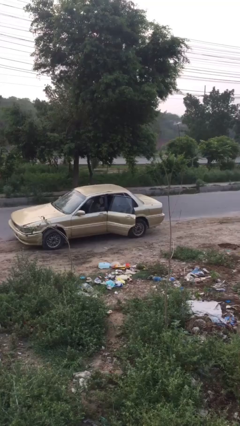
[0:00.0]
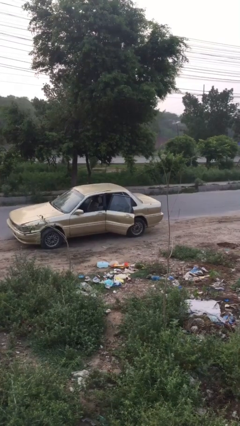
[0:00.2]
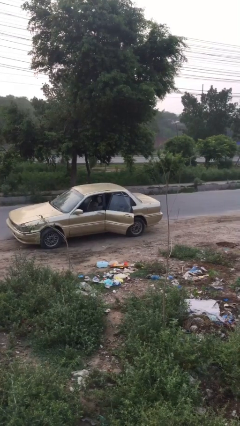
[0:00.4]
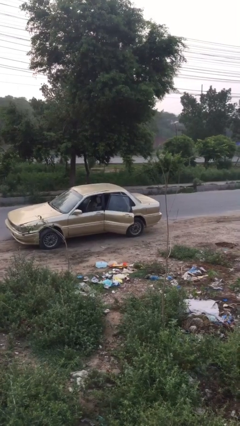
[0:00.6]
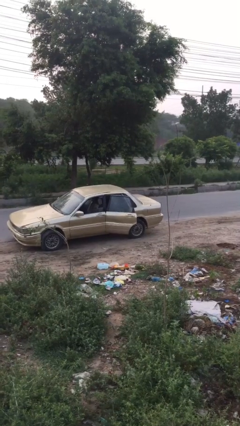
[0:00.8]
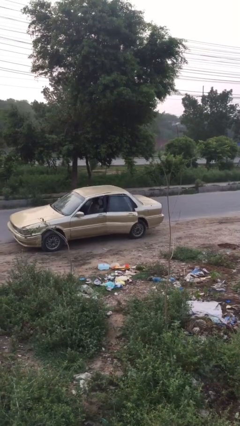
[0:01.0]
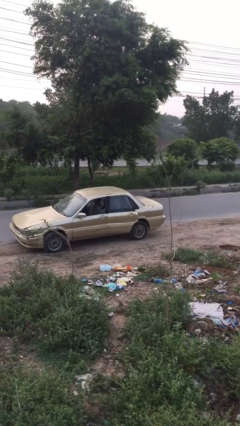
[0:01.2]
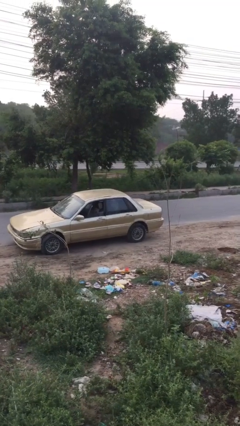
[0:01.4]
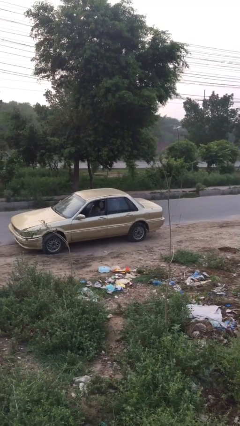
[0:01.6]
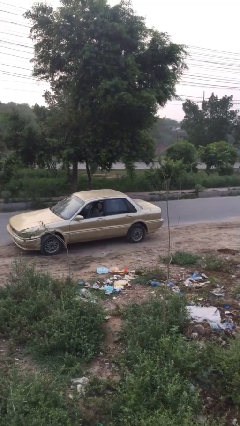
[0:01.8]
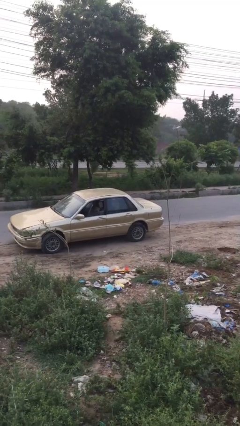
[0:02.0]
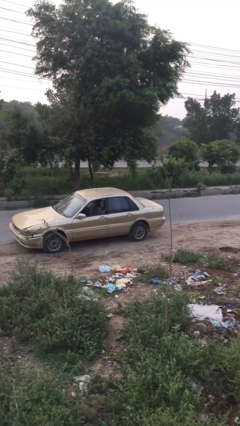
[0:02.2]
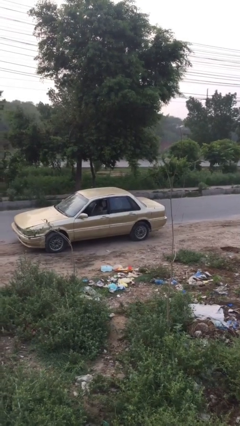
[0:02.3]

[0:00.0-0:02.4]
person closes car door

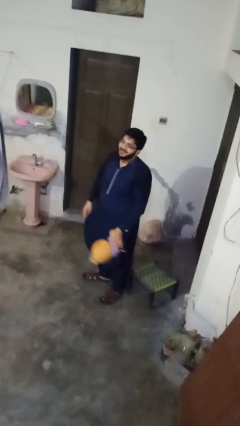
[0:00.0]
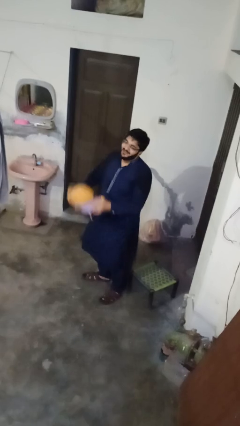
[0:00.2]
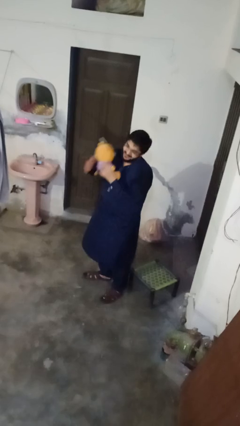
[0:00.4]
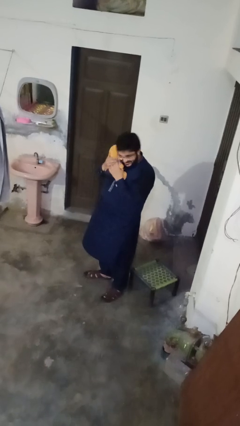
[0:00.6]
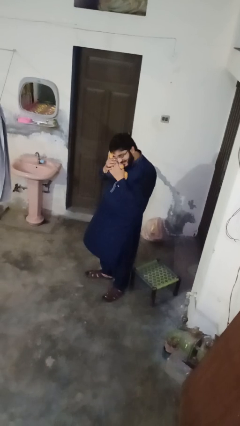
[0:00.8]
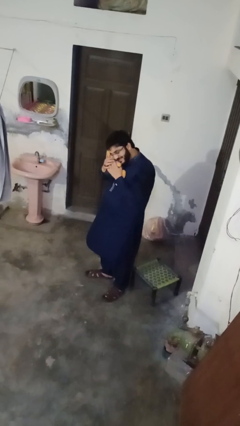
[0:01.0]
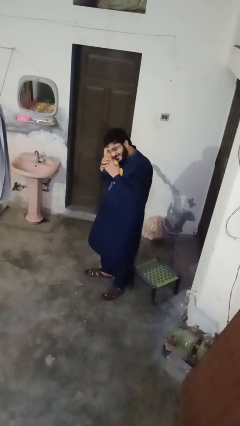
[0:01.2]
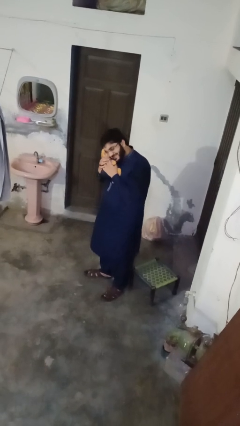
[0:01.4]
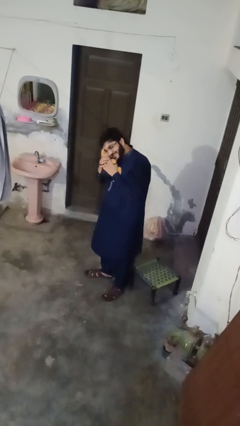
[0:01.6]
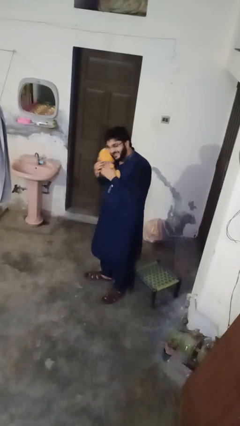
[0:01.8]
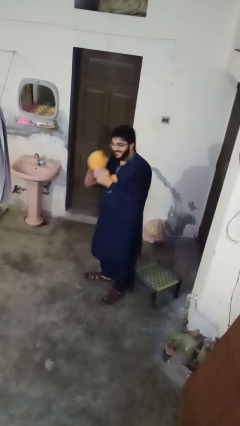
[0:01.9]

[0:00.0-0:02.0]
person hugs stuffed animal

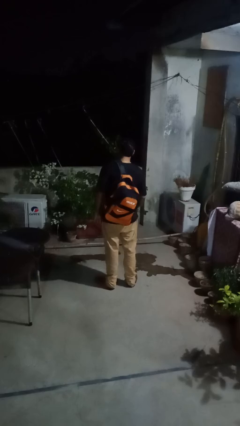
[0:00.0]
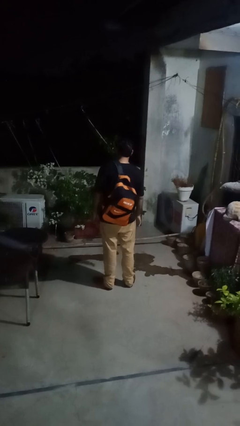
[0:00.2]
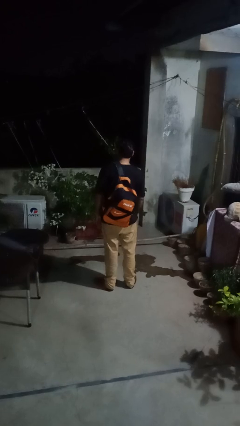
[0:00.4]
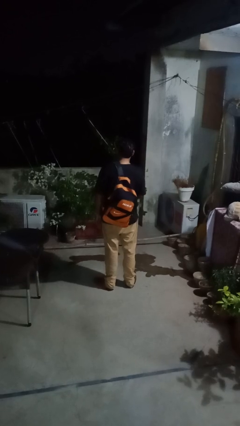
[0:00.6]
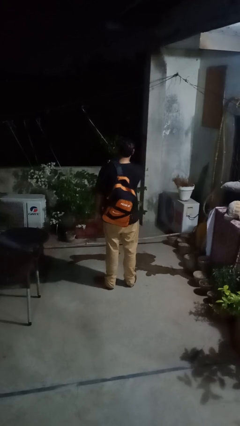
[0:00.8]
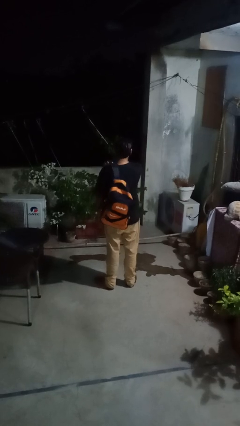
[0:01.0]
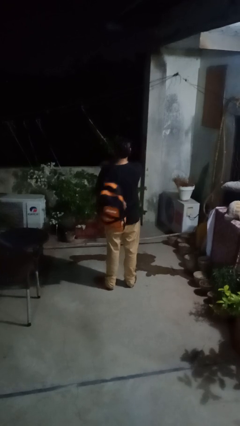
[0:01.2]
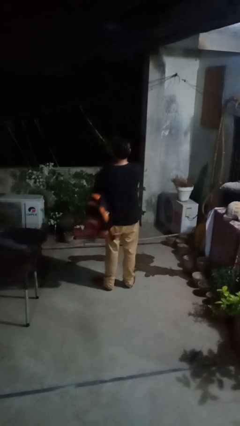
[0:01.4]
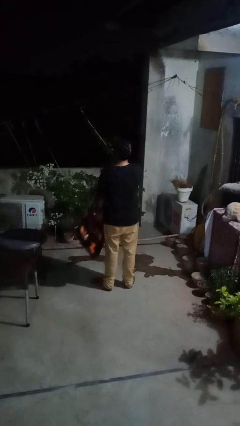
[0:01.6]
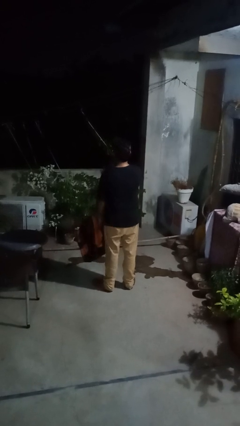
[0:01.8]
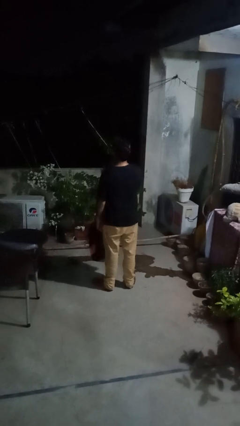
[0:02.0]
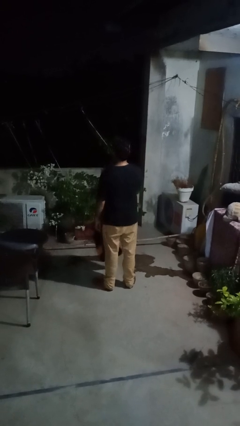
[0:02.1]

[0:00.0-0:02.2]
person takes off backpack

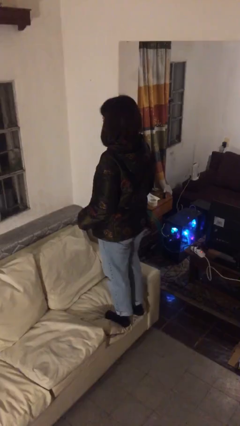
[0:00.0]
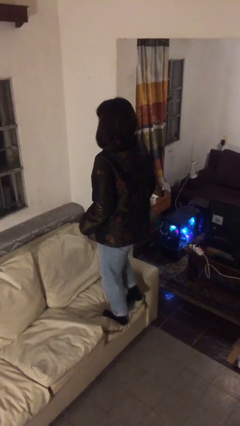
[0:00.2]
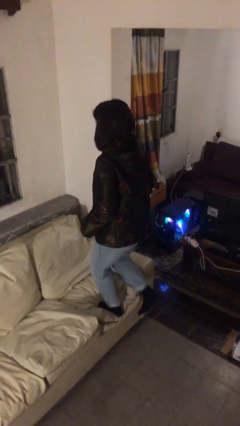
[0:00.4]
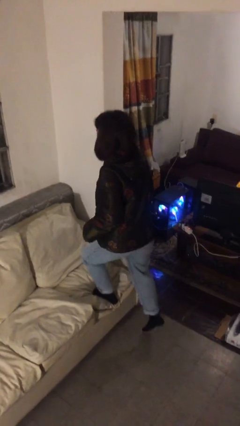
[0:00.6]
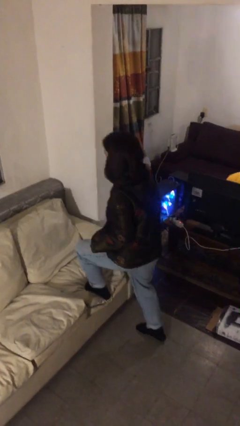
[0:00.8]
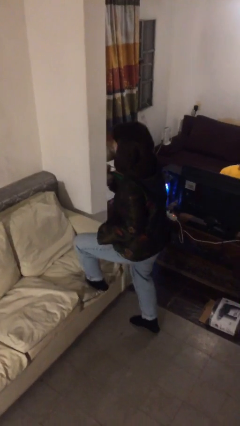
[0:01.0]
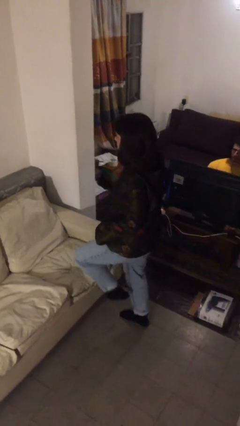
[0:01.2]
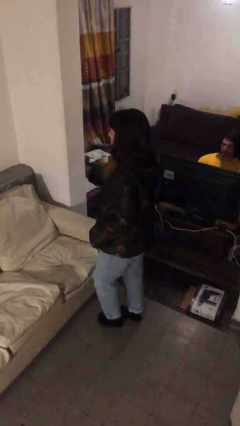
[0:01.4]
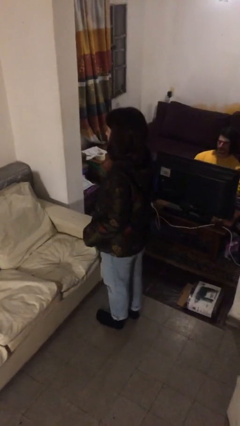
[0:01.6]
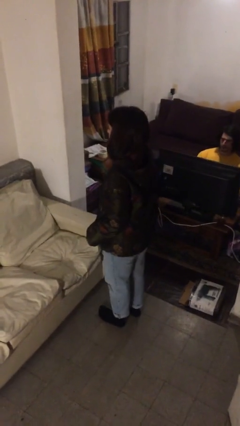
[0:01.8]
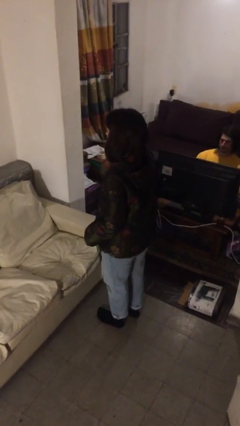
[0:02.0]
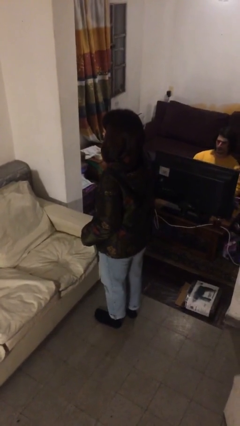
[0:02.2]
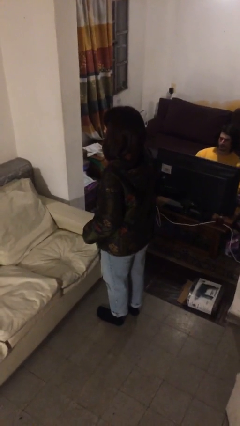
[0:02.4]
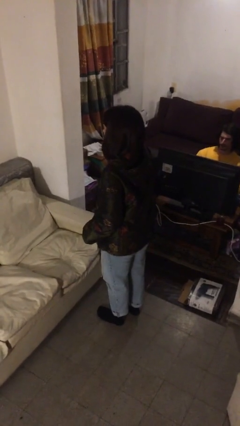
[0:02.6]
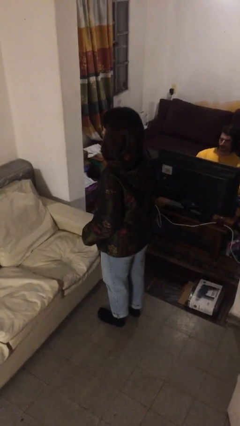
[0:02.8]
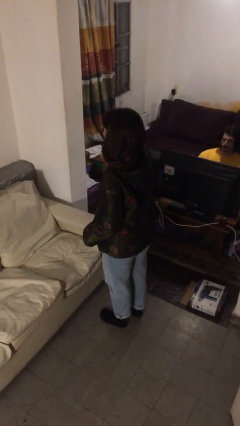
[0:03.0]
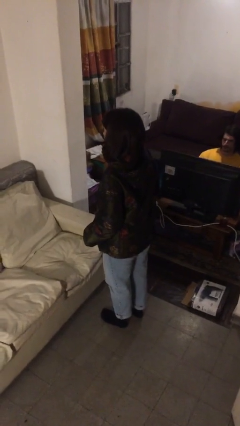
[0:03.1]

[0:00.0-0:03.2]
person climbs off couch

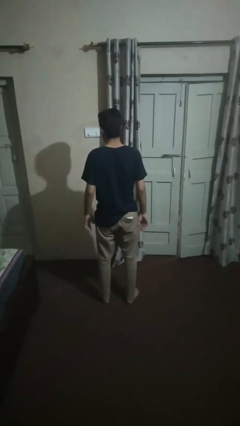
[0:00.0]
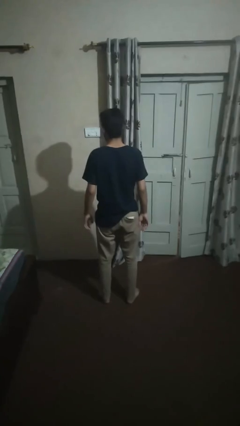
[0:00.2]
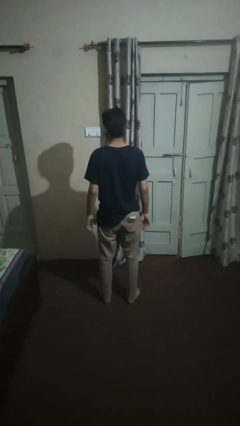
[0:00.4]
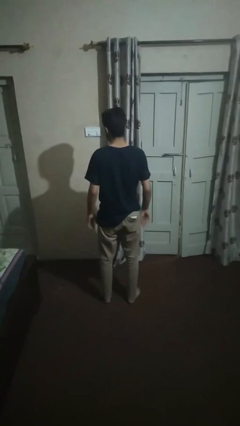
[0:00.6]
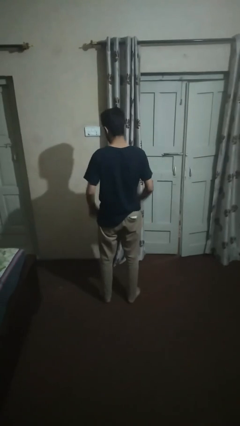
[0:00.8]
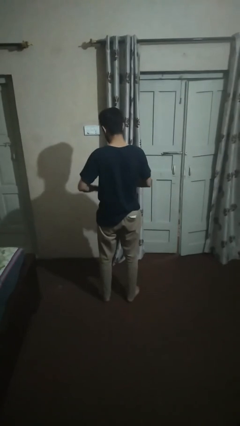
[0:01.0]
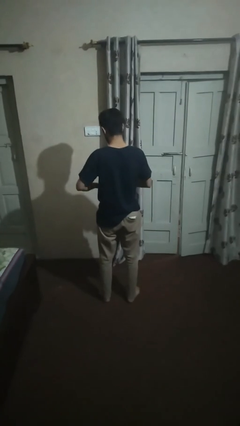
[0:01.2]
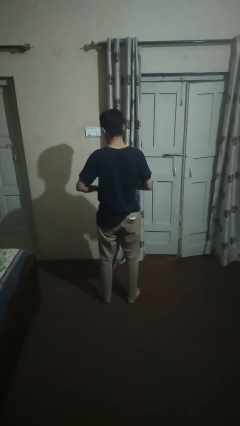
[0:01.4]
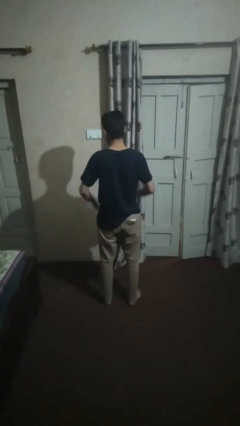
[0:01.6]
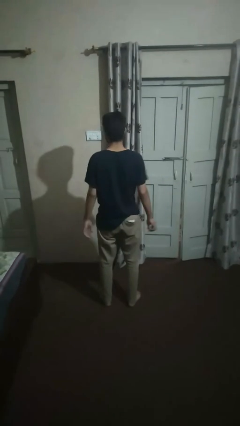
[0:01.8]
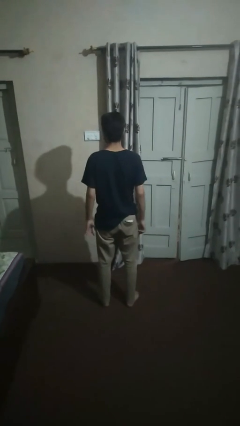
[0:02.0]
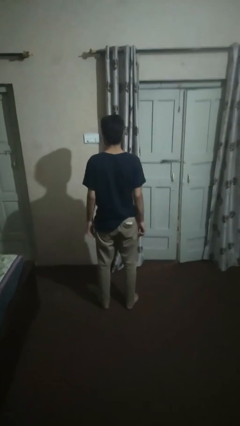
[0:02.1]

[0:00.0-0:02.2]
person takes off ring

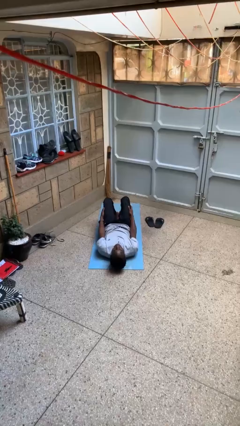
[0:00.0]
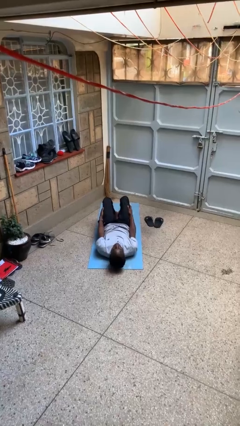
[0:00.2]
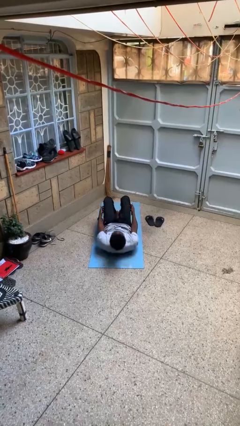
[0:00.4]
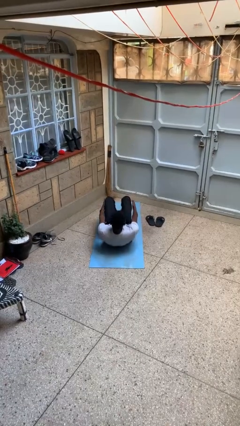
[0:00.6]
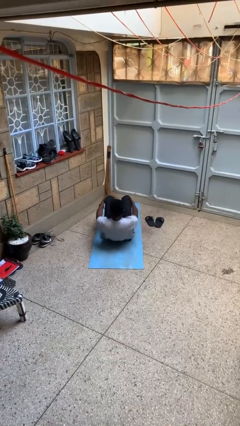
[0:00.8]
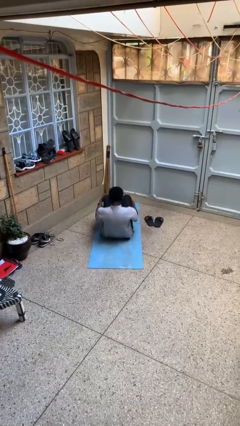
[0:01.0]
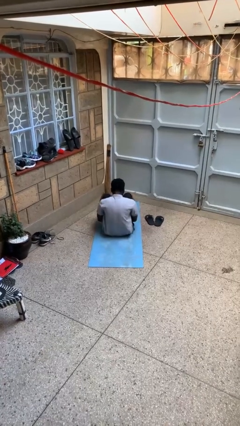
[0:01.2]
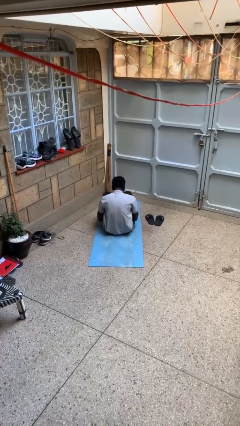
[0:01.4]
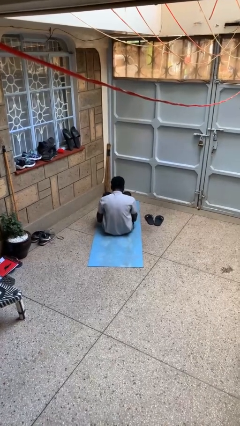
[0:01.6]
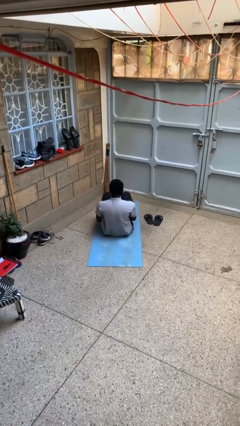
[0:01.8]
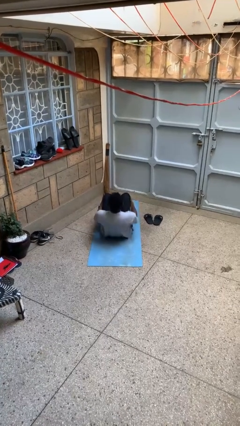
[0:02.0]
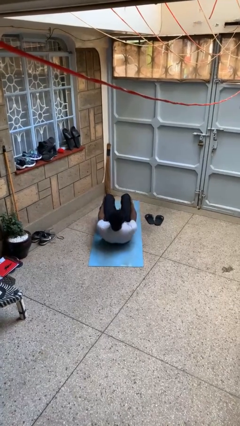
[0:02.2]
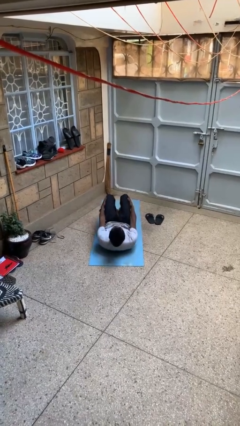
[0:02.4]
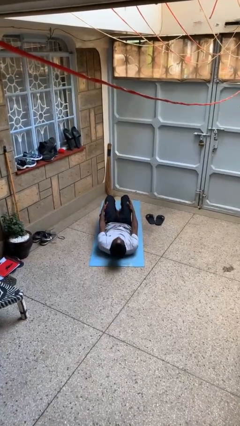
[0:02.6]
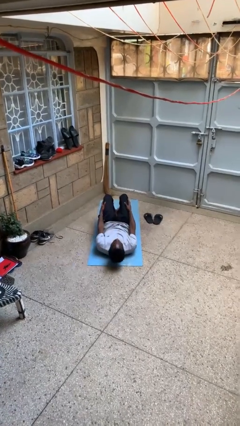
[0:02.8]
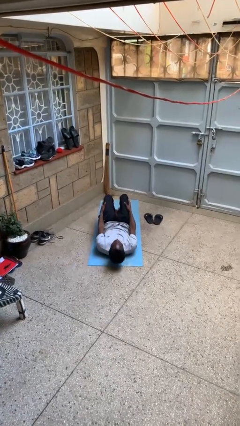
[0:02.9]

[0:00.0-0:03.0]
person exercises with situp

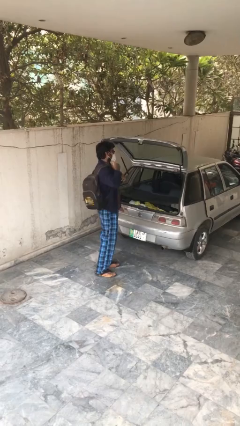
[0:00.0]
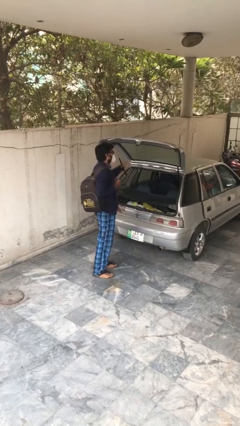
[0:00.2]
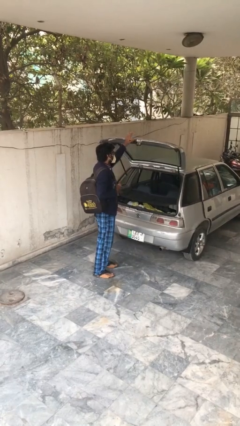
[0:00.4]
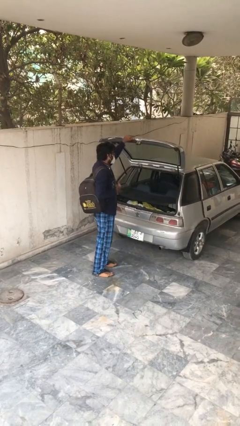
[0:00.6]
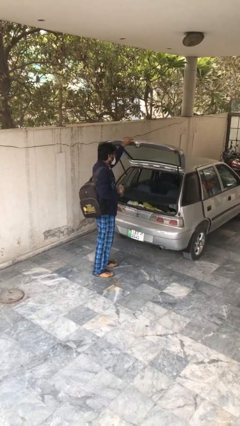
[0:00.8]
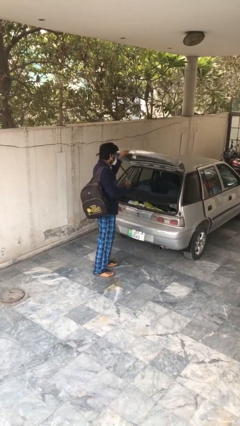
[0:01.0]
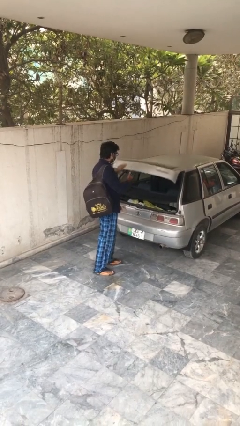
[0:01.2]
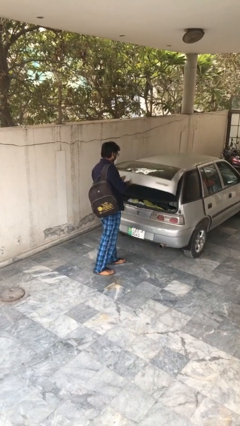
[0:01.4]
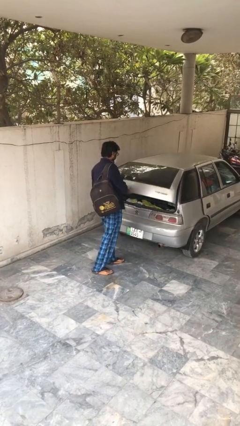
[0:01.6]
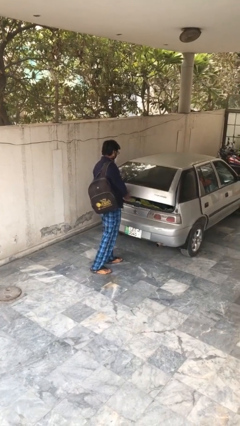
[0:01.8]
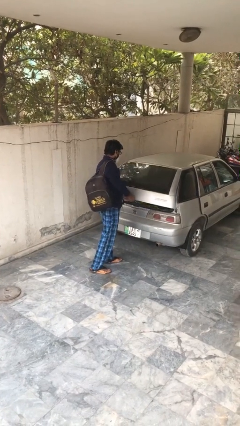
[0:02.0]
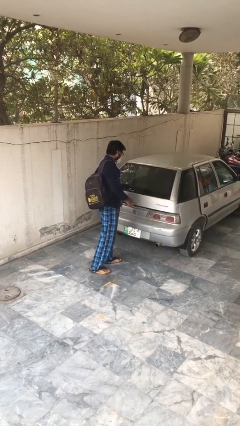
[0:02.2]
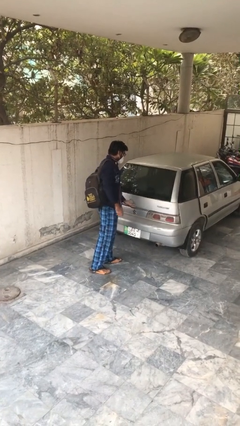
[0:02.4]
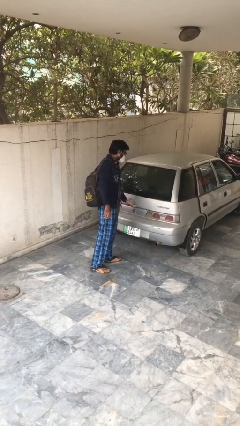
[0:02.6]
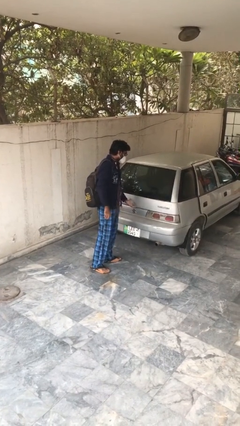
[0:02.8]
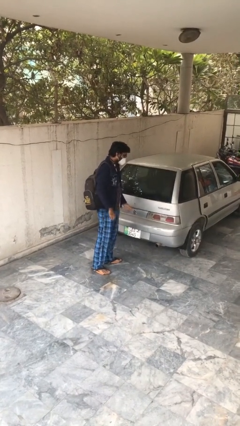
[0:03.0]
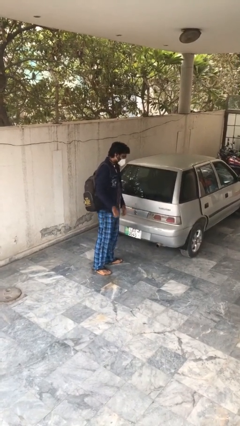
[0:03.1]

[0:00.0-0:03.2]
person closes car trunk
